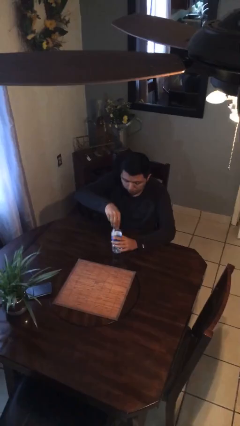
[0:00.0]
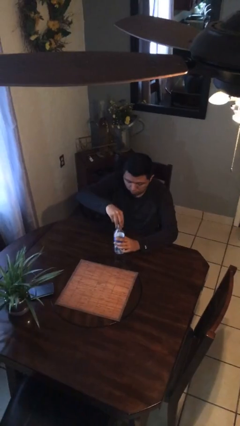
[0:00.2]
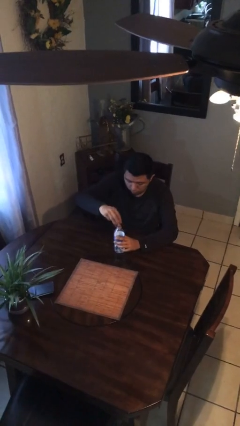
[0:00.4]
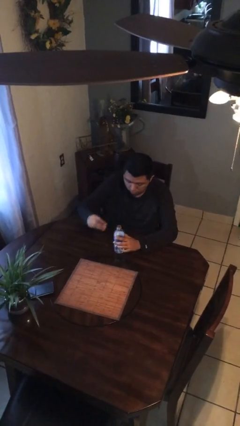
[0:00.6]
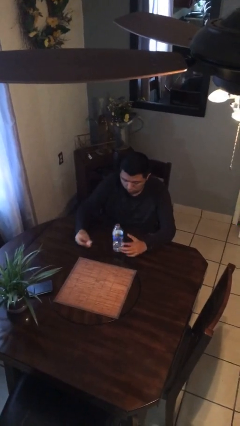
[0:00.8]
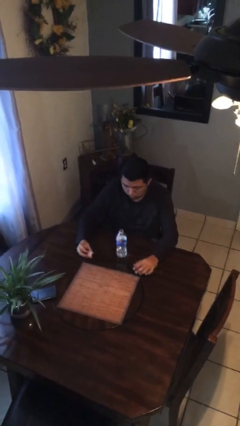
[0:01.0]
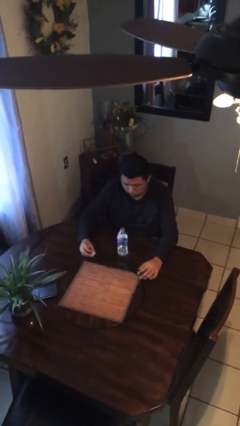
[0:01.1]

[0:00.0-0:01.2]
person unscrews lid from bottle

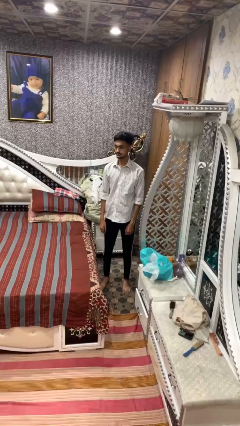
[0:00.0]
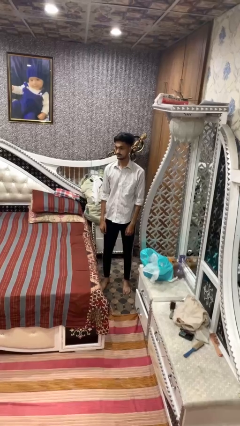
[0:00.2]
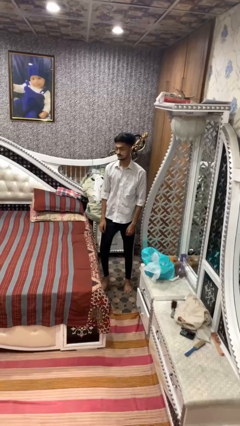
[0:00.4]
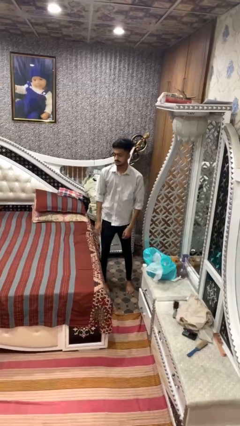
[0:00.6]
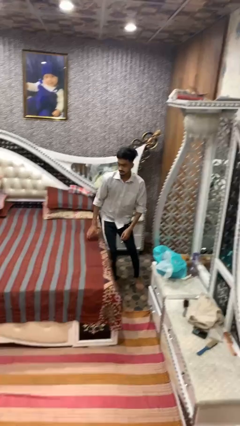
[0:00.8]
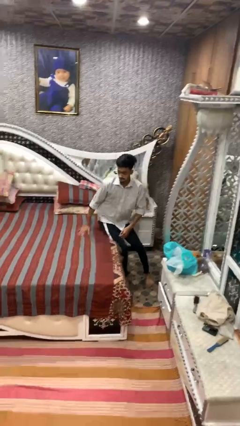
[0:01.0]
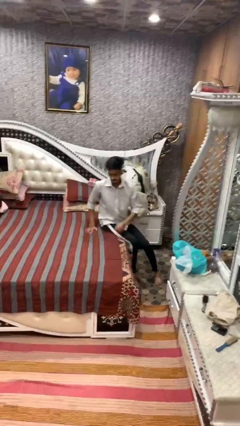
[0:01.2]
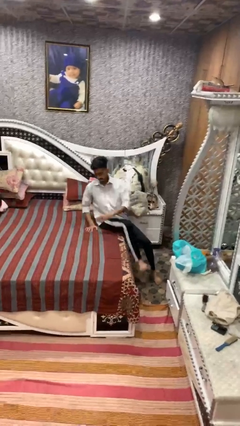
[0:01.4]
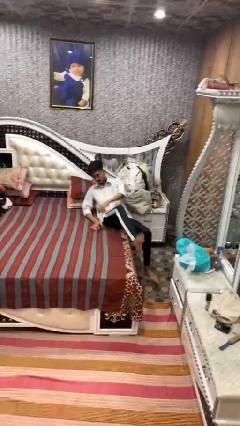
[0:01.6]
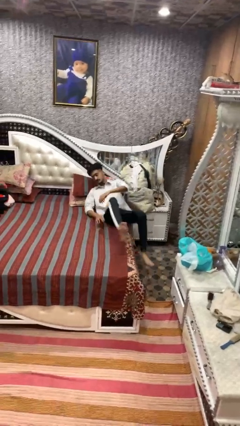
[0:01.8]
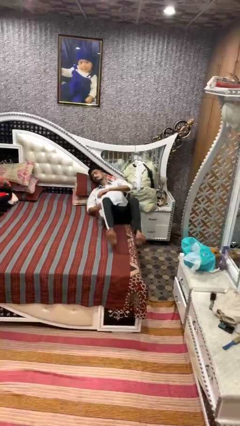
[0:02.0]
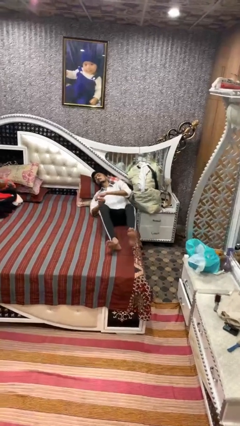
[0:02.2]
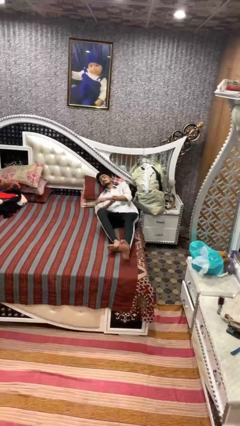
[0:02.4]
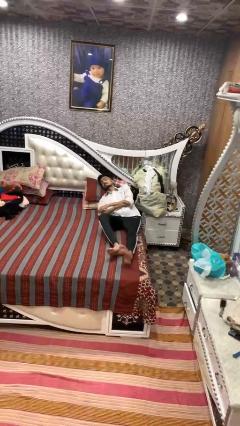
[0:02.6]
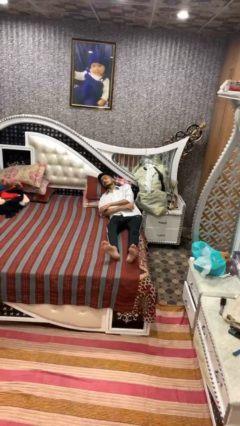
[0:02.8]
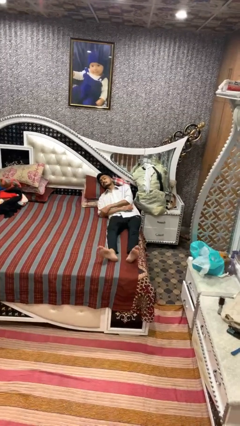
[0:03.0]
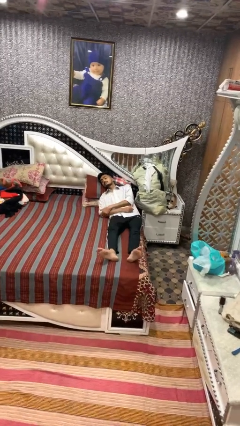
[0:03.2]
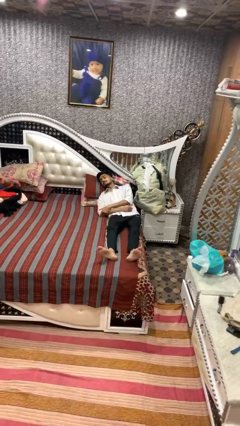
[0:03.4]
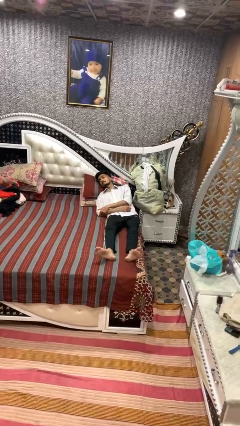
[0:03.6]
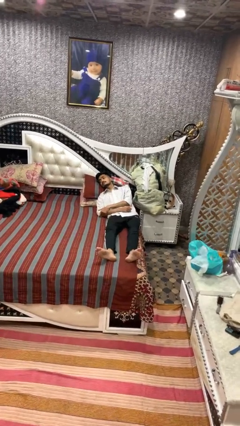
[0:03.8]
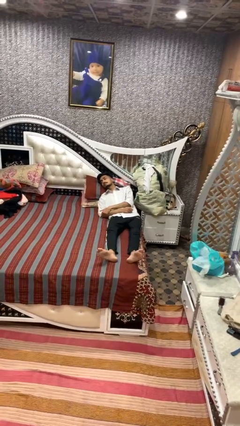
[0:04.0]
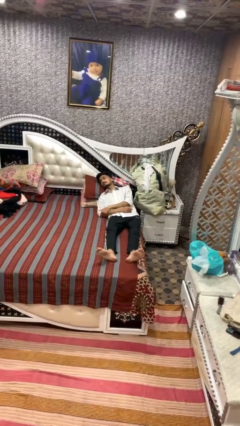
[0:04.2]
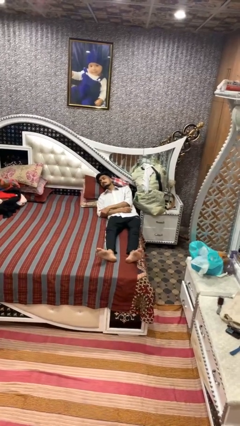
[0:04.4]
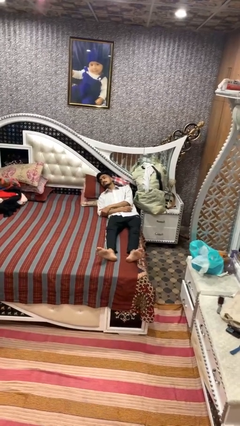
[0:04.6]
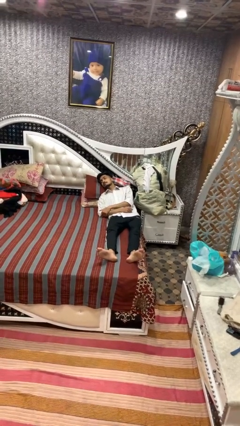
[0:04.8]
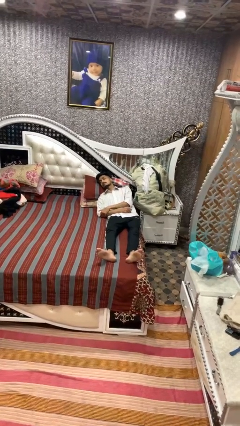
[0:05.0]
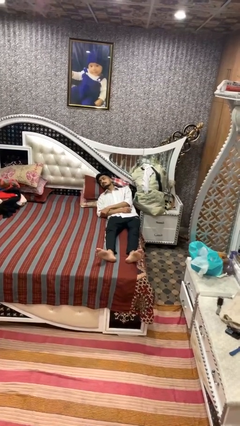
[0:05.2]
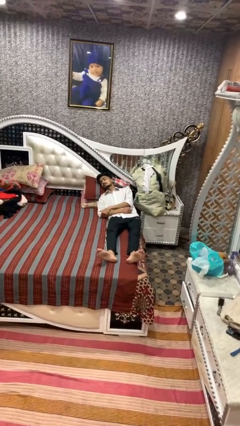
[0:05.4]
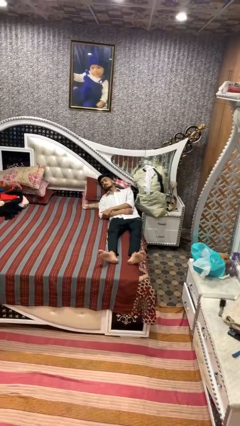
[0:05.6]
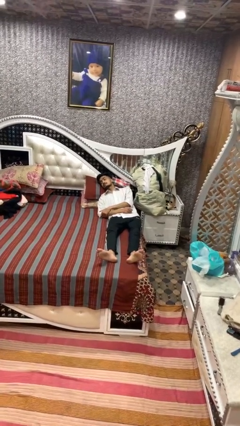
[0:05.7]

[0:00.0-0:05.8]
person lies down on bed

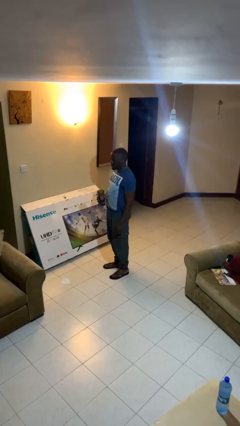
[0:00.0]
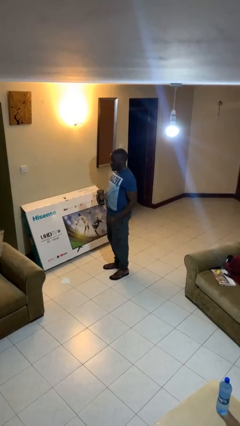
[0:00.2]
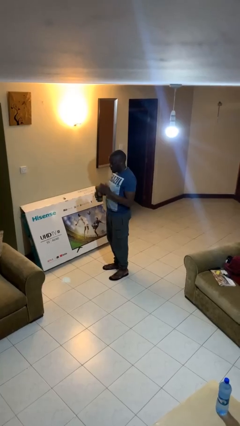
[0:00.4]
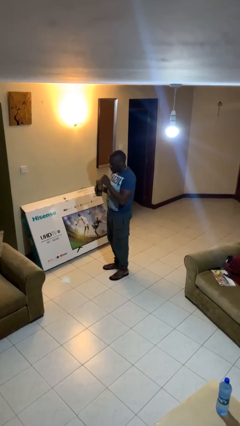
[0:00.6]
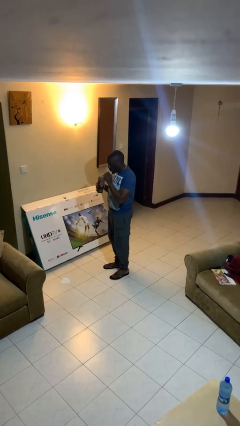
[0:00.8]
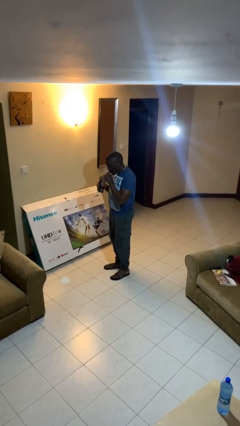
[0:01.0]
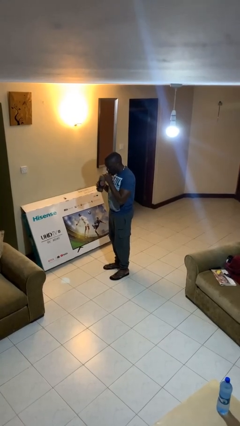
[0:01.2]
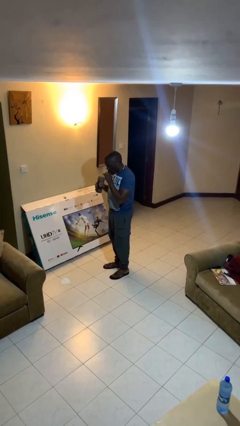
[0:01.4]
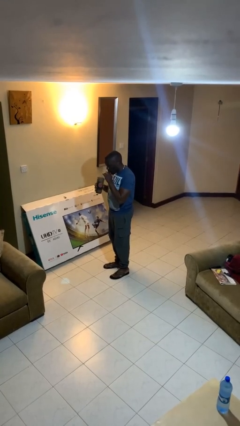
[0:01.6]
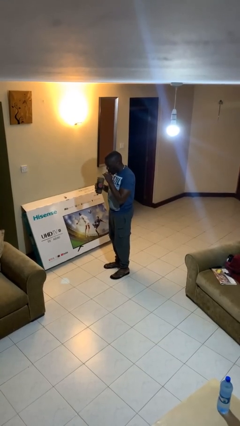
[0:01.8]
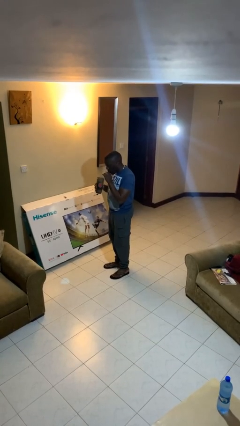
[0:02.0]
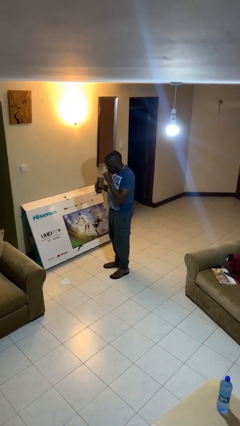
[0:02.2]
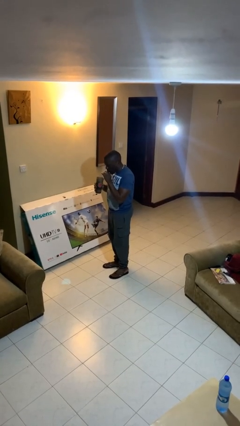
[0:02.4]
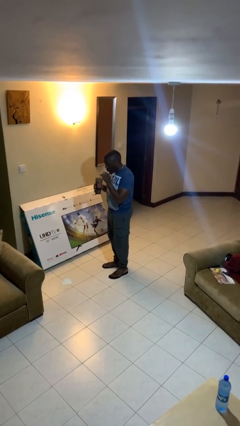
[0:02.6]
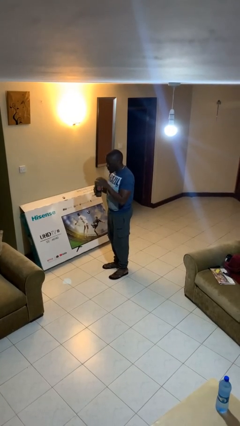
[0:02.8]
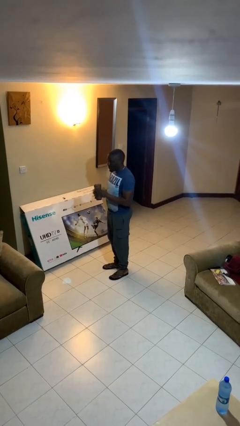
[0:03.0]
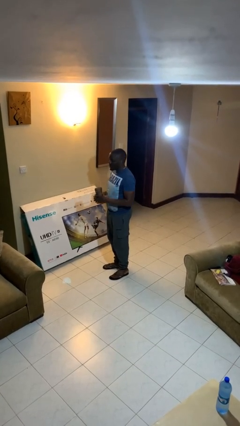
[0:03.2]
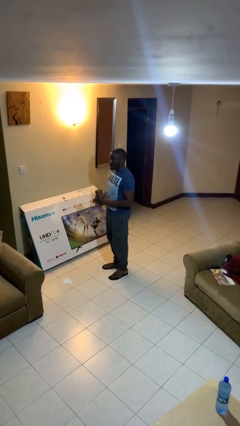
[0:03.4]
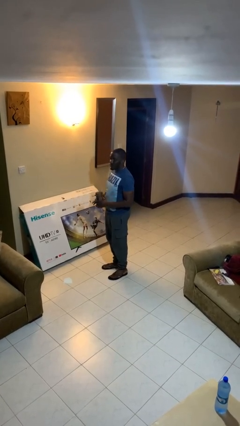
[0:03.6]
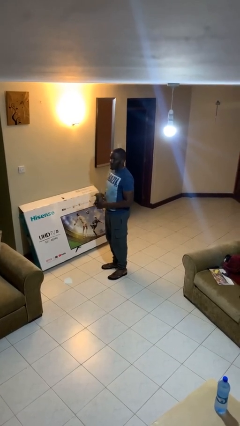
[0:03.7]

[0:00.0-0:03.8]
person drinks from straw

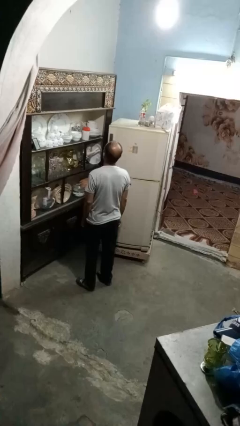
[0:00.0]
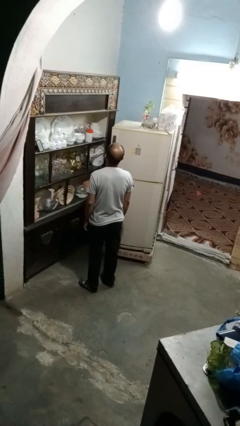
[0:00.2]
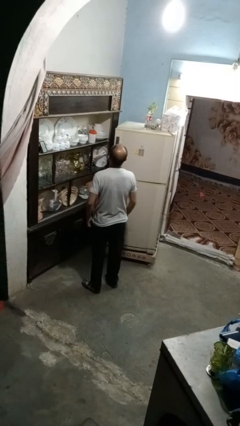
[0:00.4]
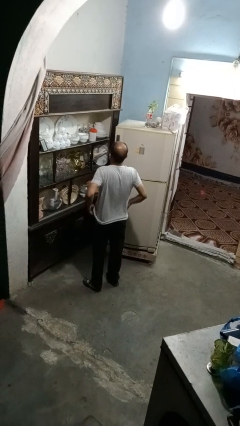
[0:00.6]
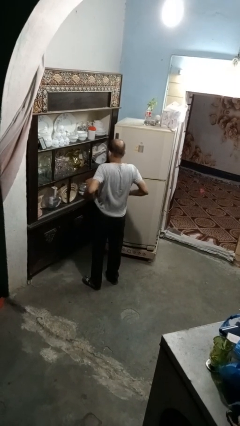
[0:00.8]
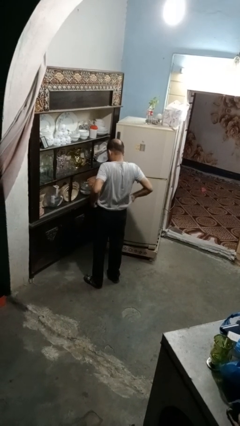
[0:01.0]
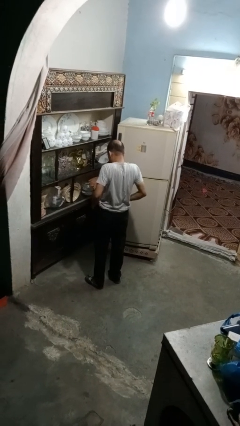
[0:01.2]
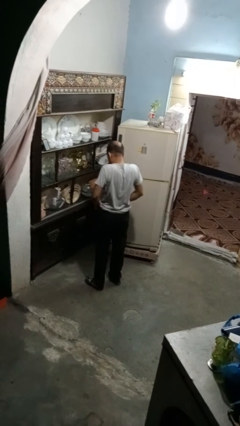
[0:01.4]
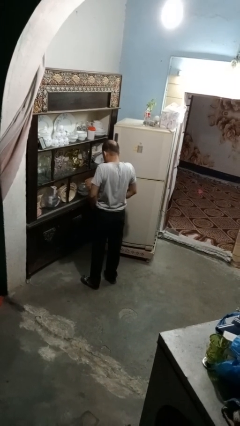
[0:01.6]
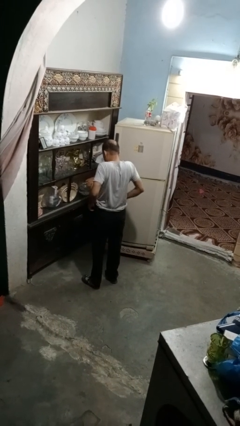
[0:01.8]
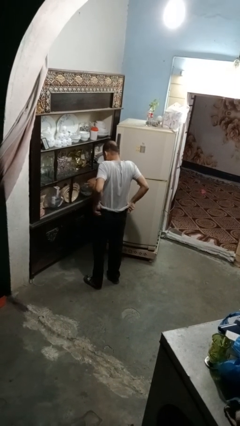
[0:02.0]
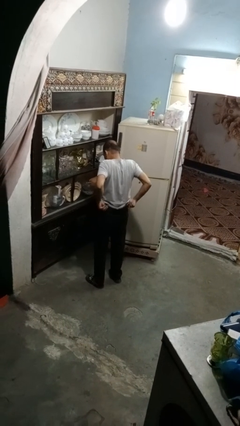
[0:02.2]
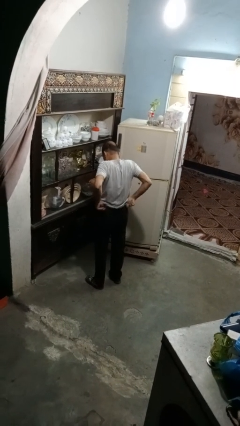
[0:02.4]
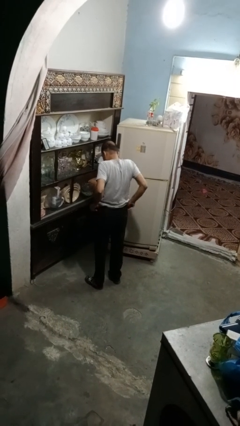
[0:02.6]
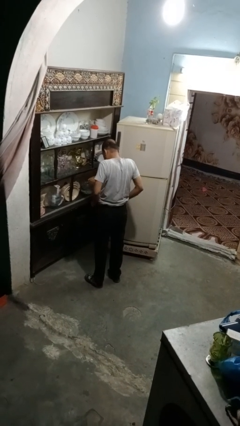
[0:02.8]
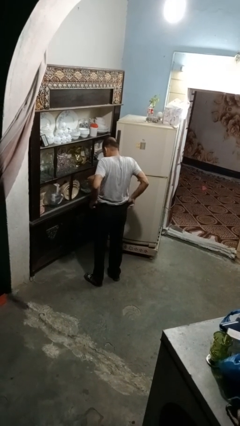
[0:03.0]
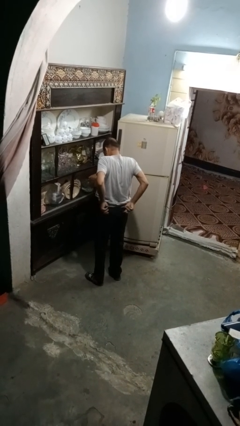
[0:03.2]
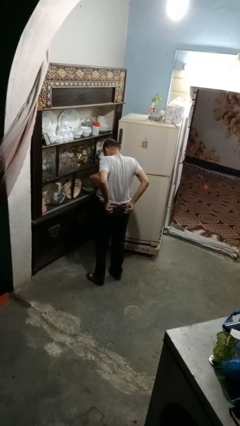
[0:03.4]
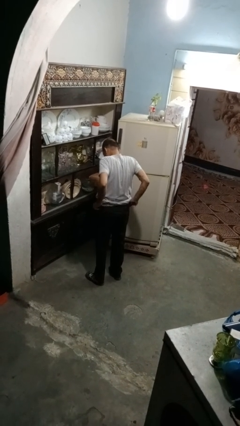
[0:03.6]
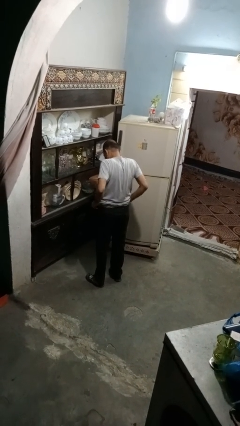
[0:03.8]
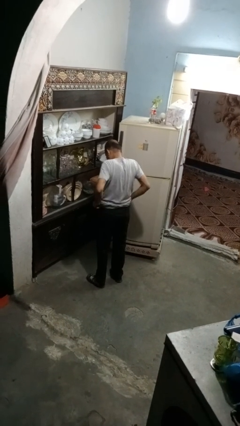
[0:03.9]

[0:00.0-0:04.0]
person hikes up pants

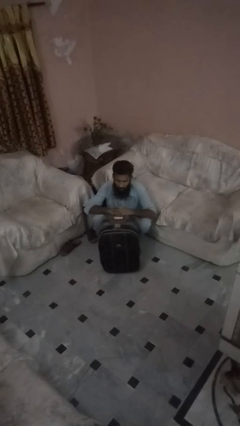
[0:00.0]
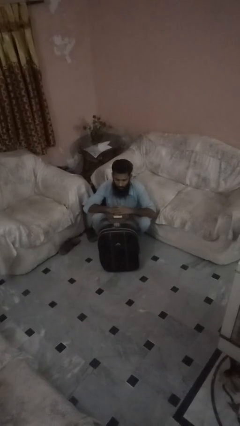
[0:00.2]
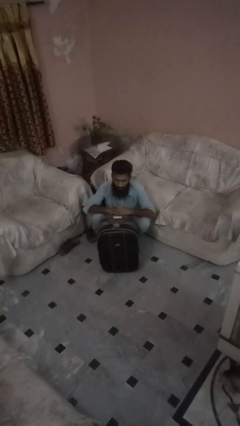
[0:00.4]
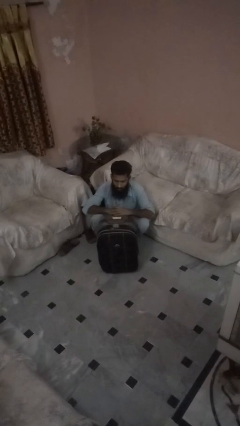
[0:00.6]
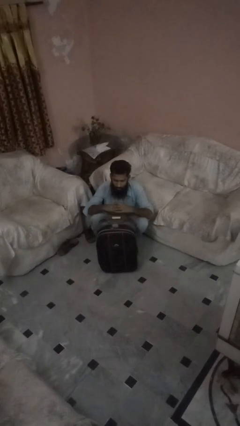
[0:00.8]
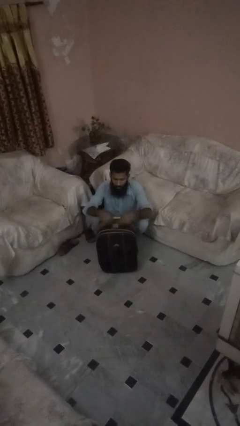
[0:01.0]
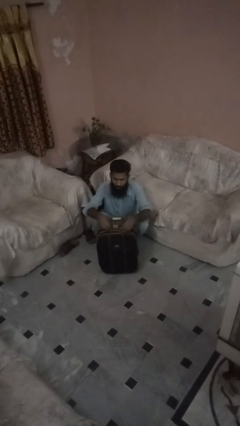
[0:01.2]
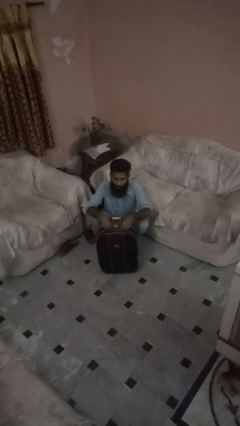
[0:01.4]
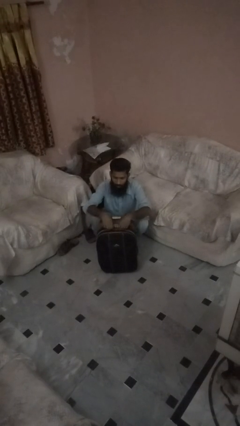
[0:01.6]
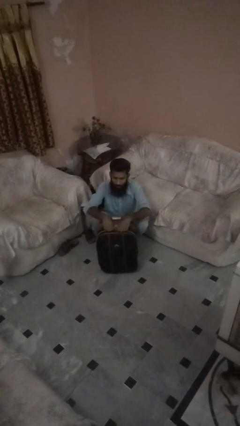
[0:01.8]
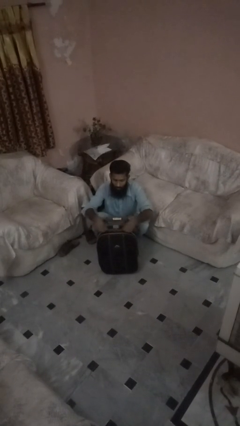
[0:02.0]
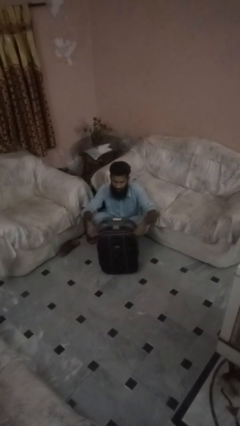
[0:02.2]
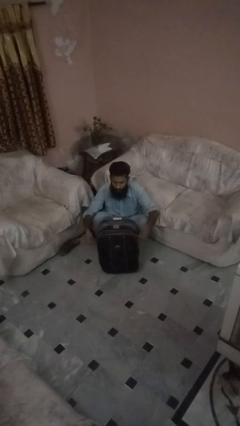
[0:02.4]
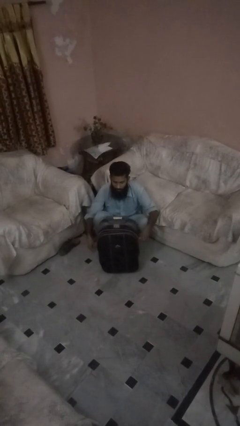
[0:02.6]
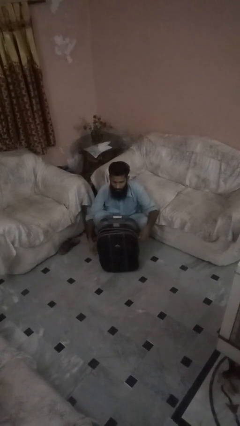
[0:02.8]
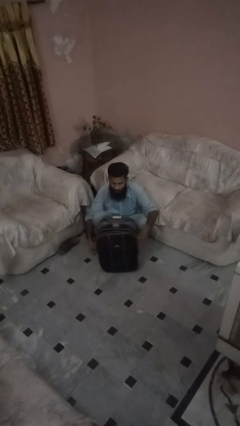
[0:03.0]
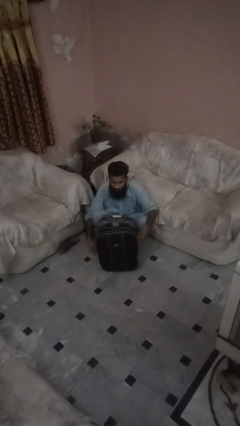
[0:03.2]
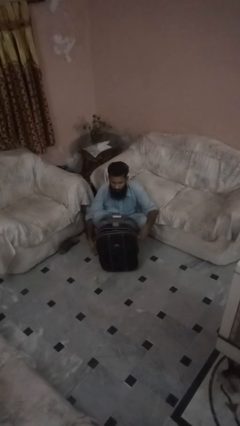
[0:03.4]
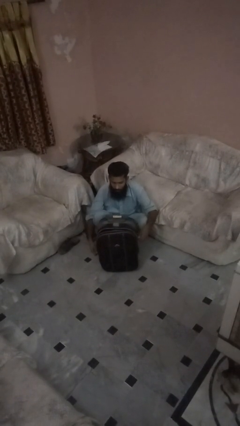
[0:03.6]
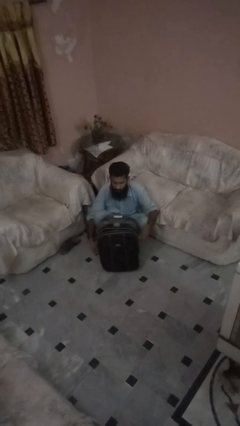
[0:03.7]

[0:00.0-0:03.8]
person opens suitcase
